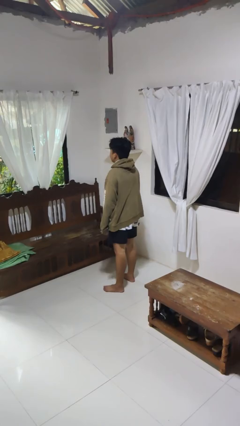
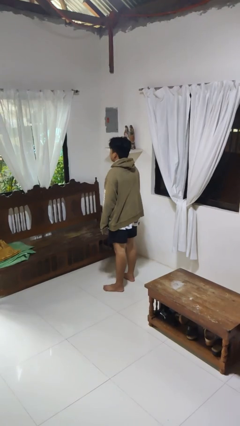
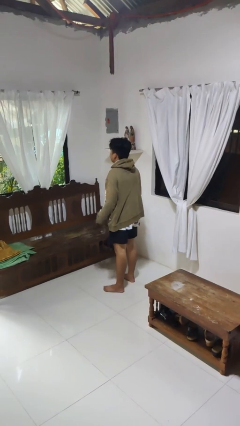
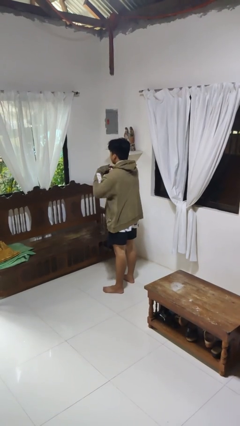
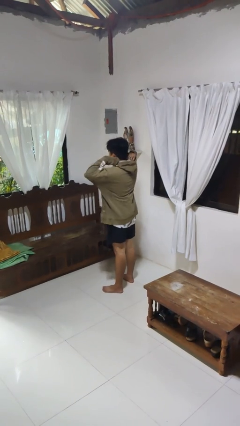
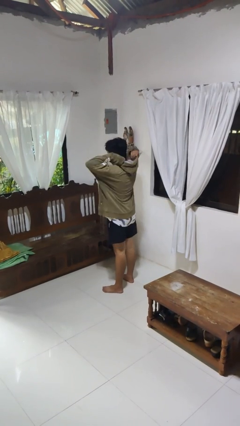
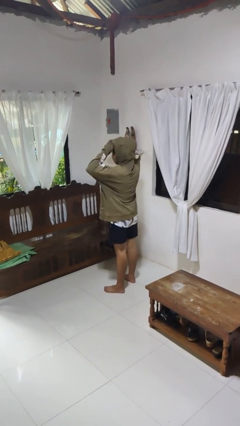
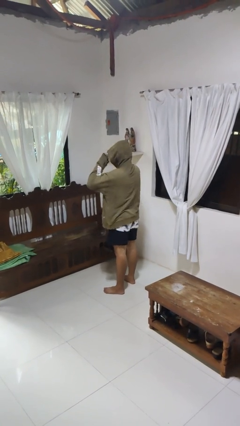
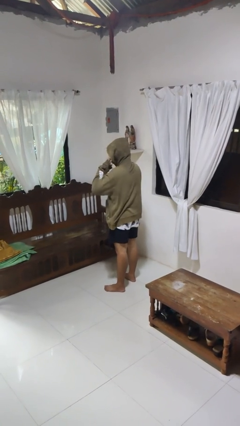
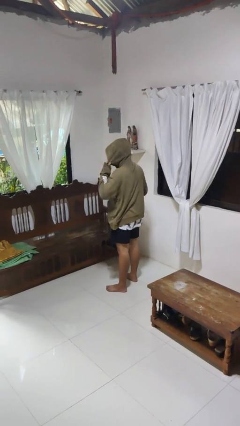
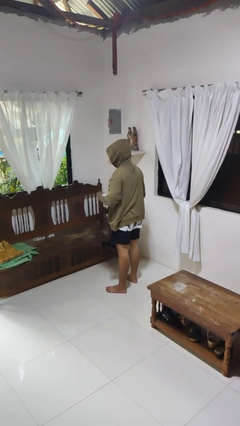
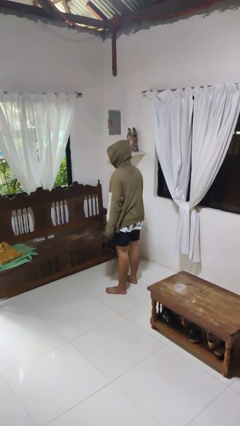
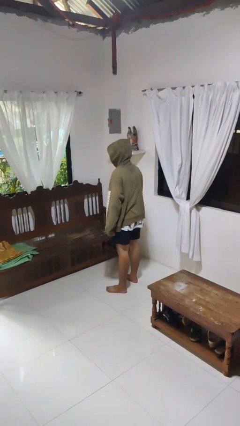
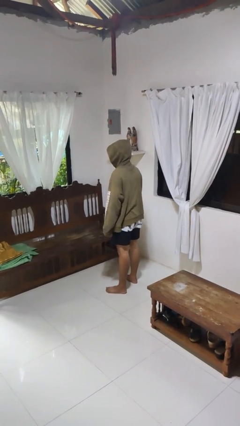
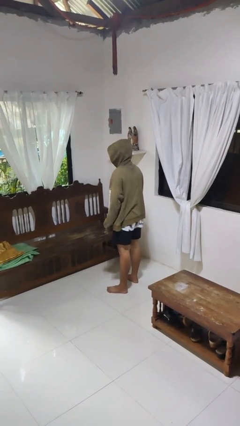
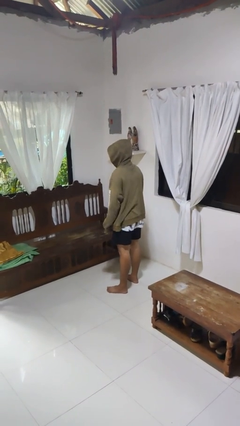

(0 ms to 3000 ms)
person puts on hoodie

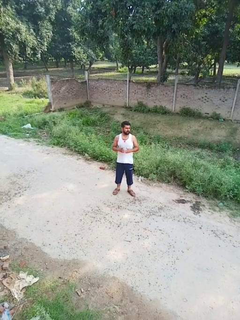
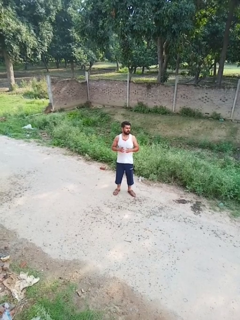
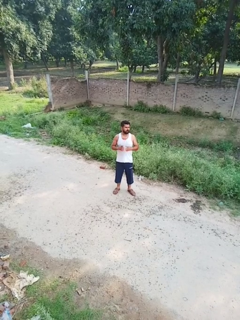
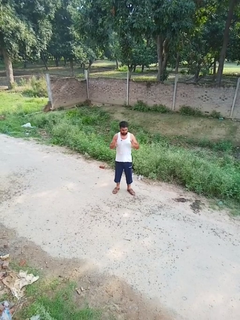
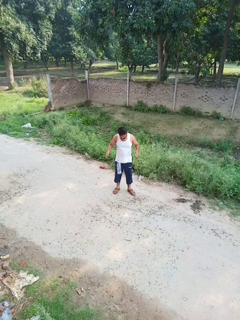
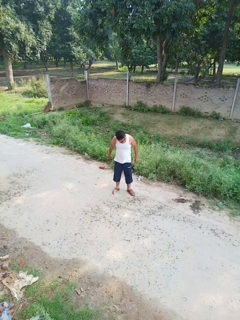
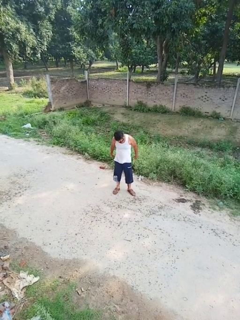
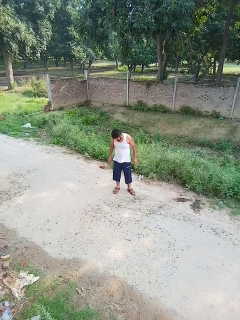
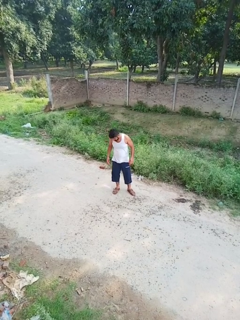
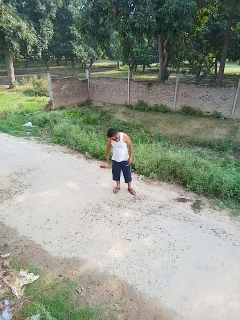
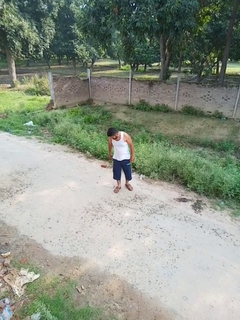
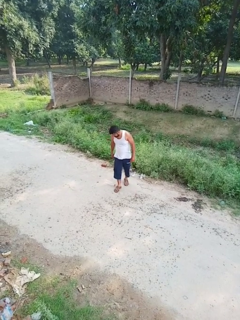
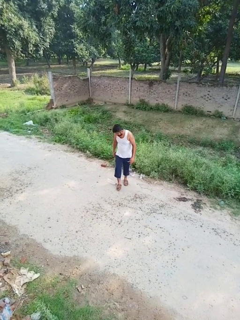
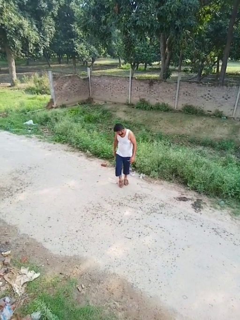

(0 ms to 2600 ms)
person drops object

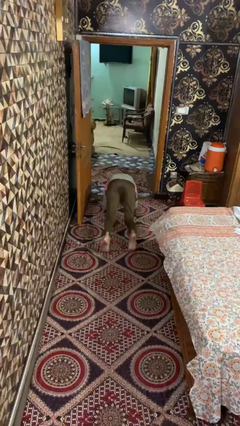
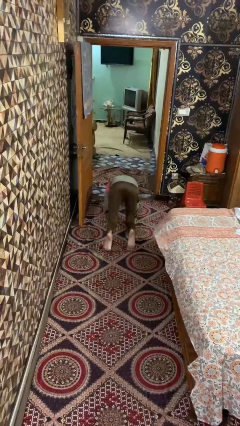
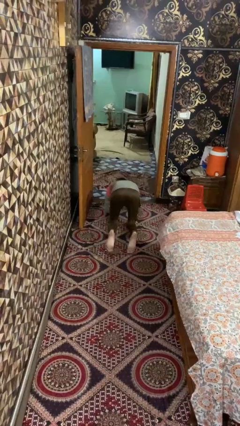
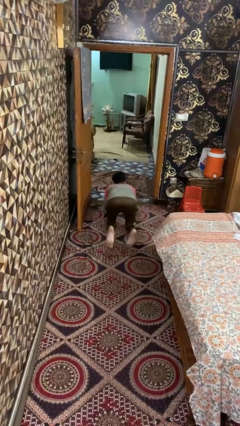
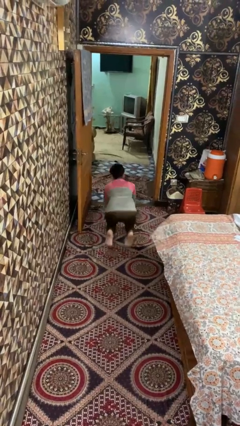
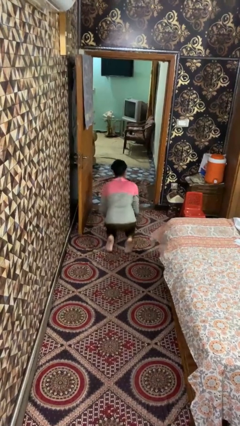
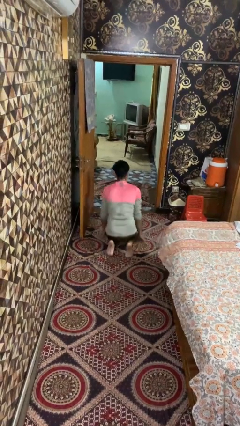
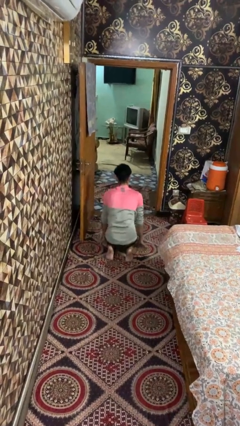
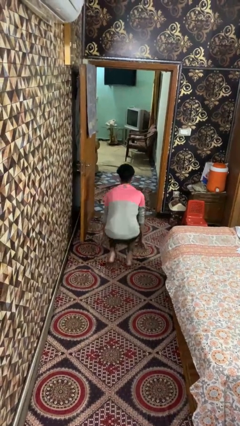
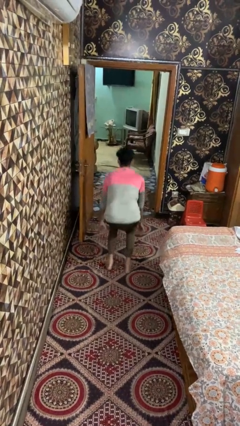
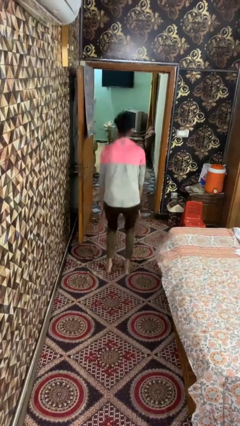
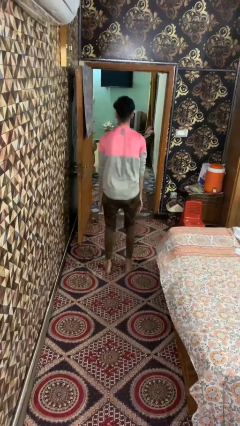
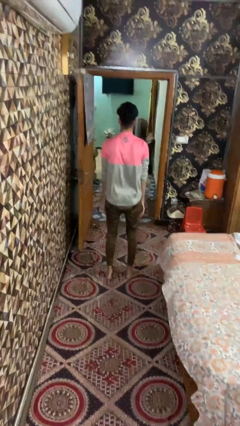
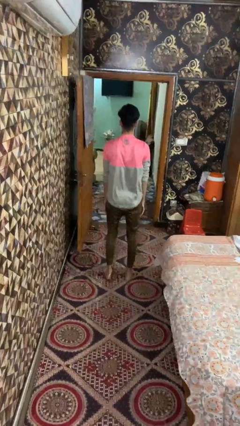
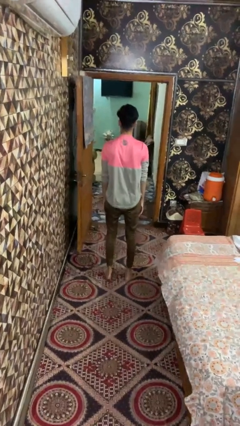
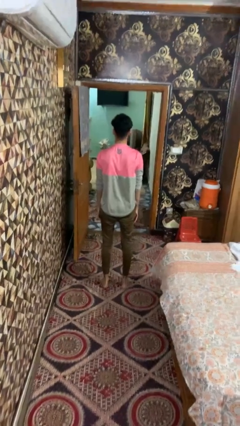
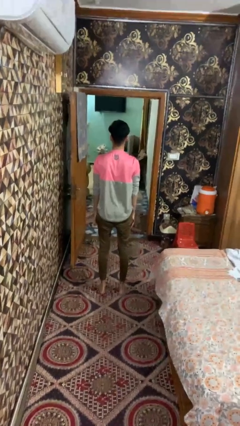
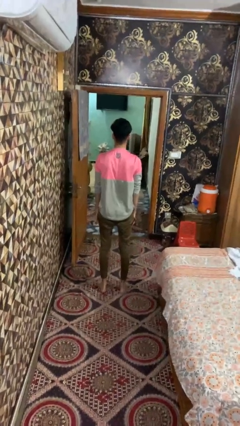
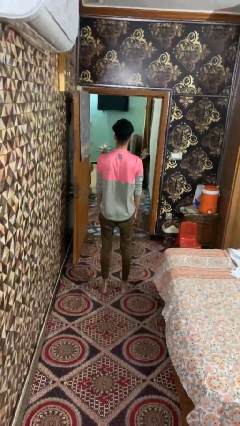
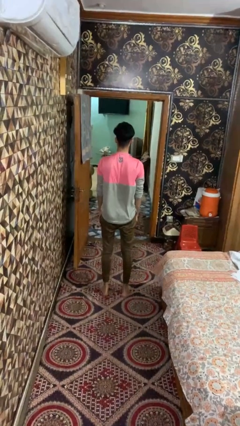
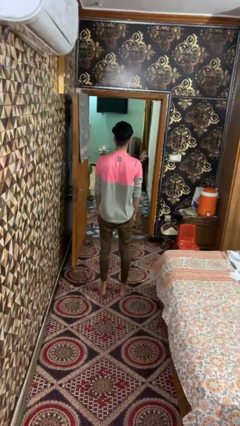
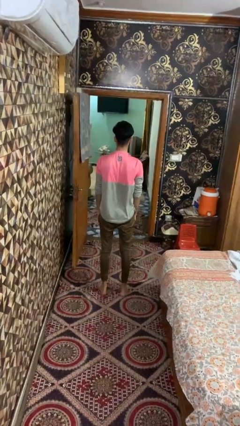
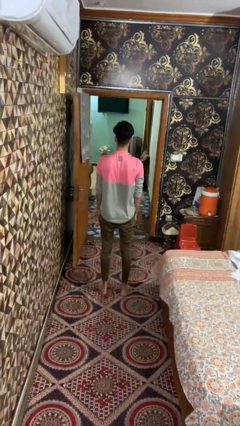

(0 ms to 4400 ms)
person stands up from floor

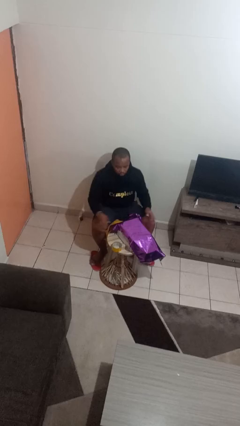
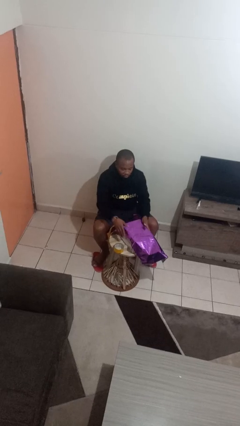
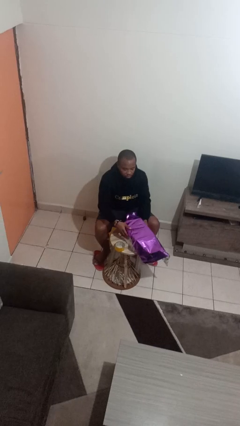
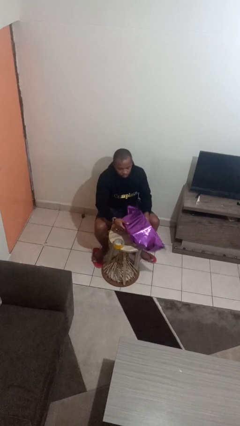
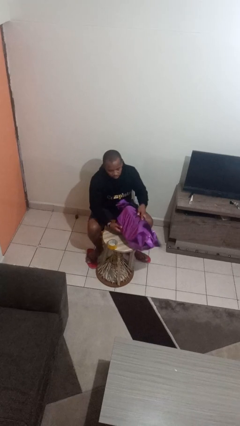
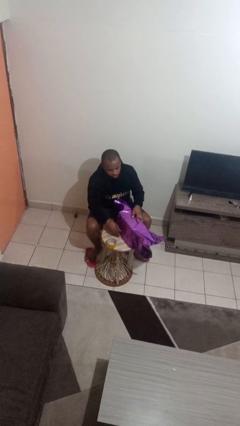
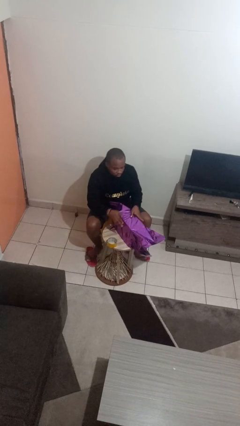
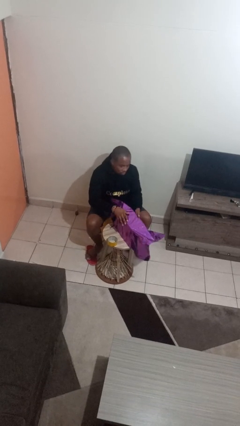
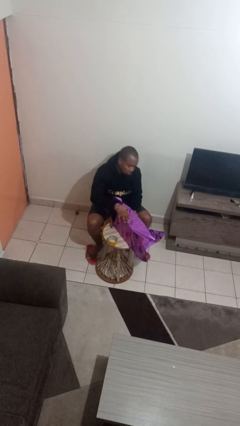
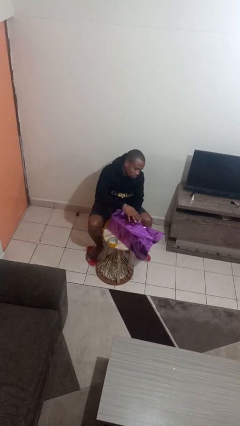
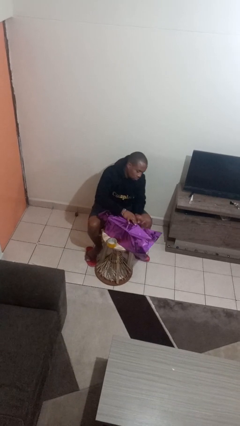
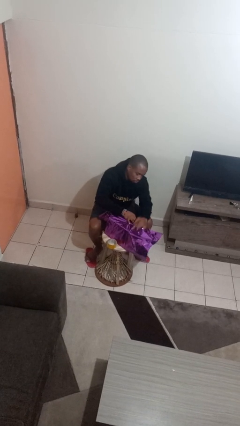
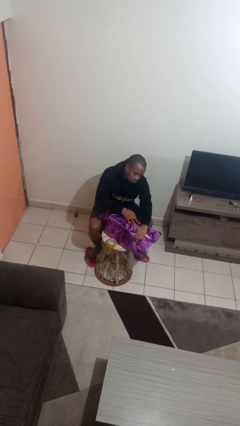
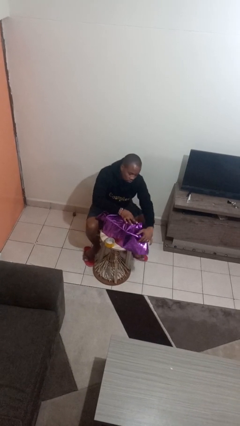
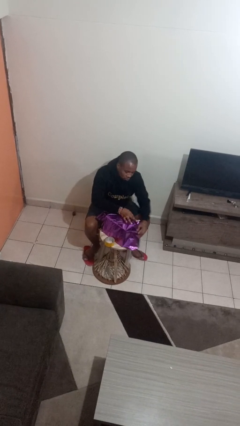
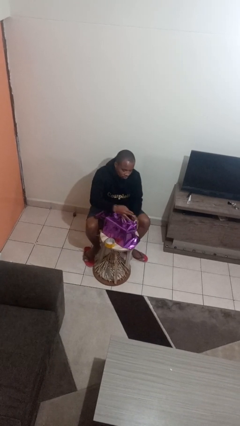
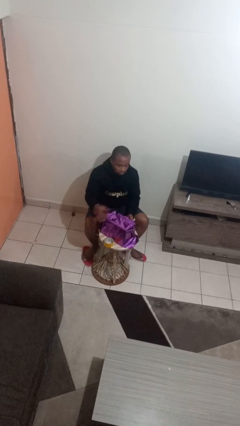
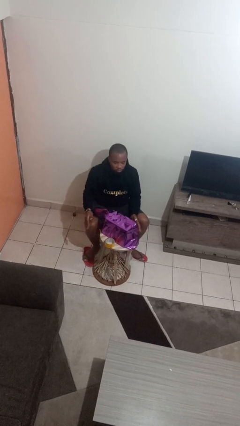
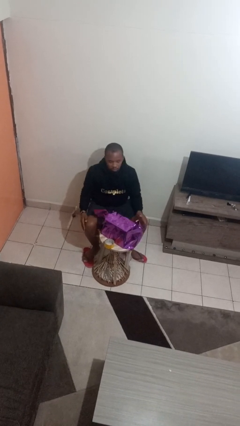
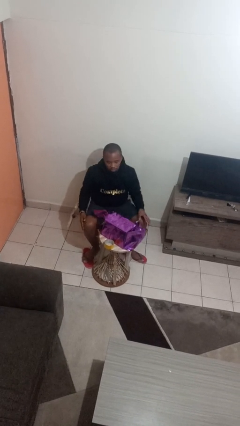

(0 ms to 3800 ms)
person wraps box

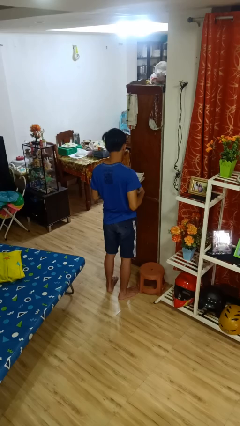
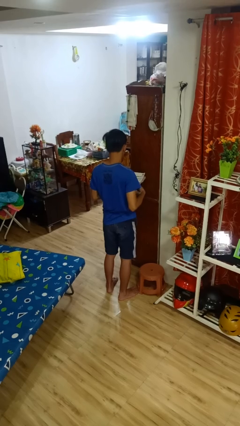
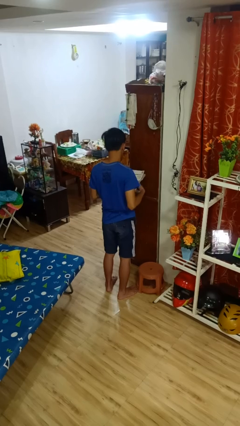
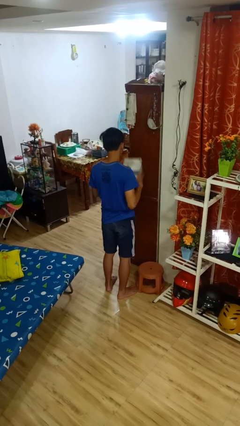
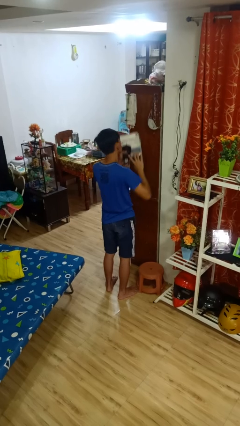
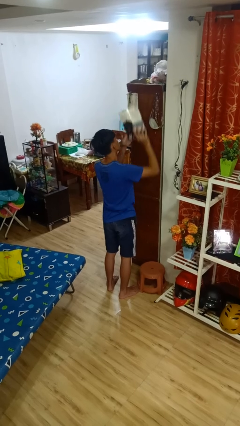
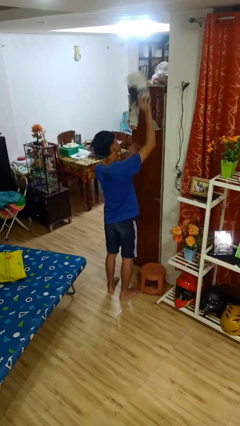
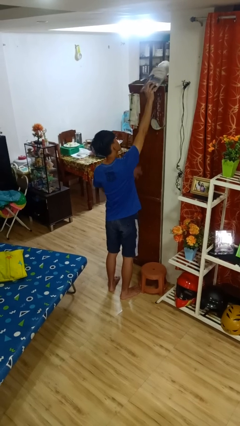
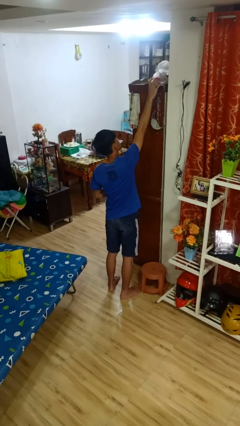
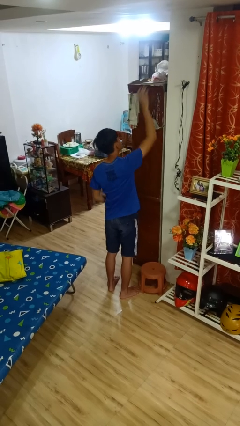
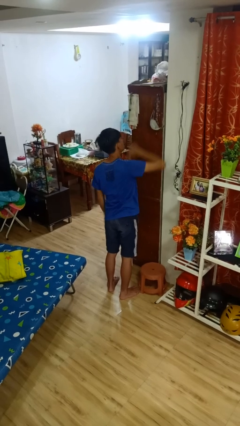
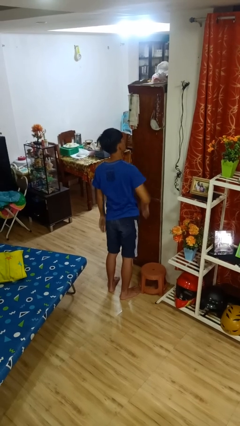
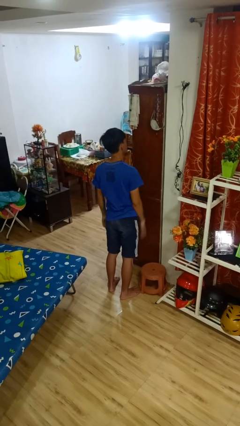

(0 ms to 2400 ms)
person puts down object on shelf

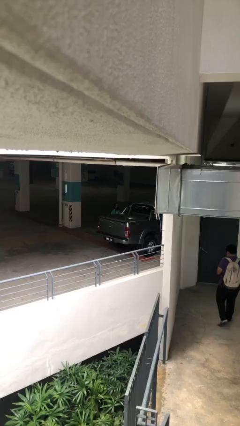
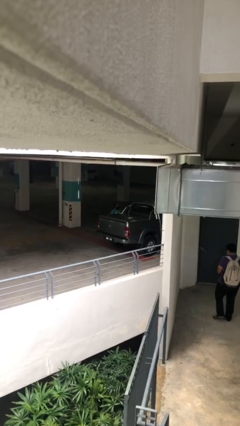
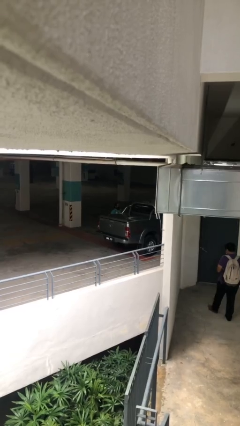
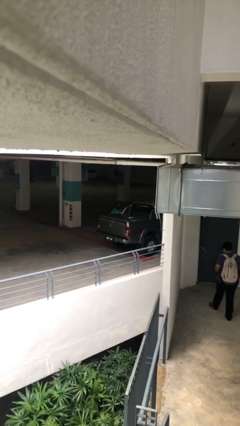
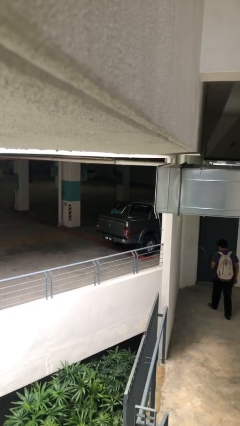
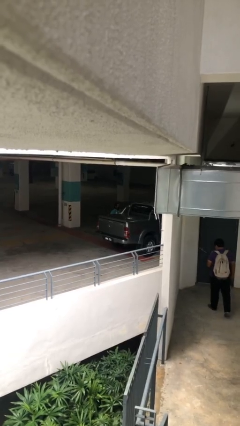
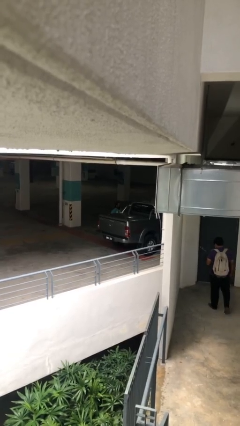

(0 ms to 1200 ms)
person closes car door

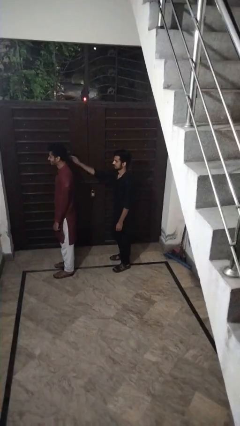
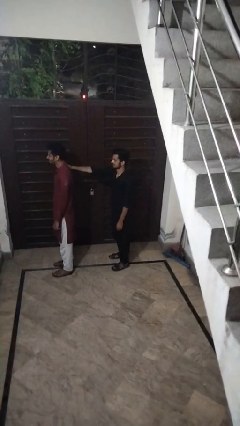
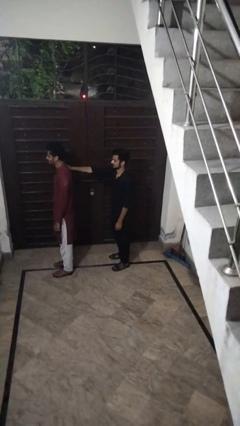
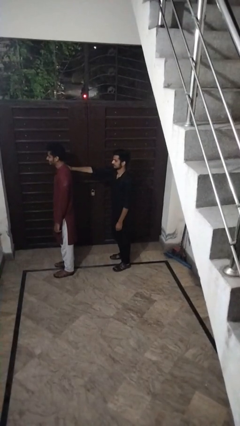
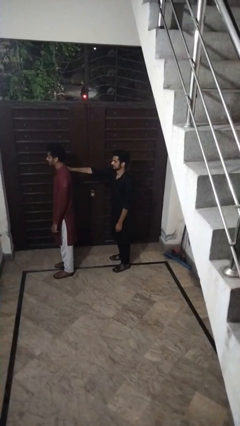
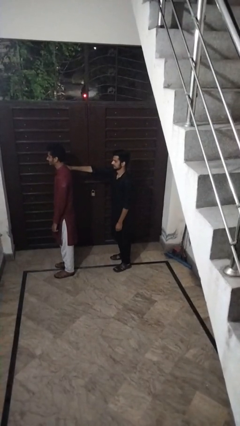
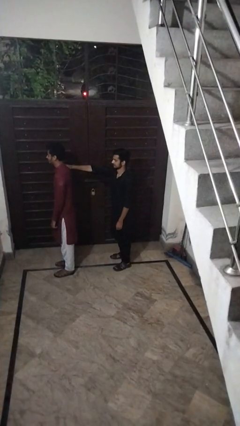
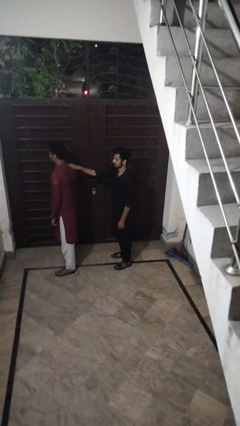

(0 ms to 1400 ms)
person grabs person by shoulder
